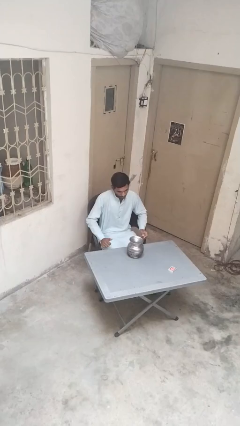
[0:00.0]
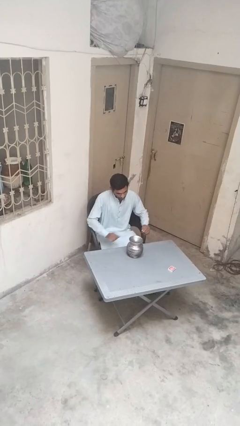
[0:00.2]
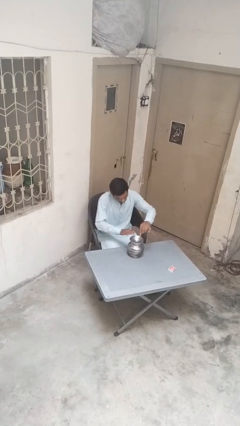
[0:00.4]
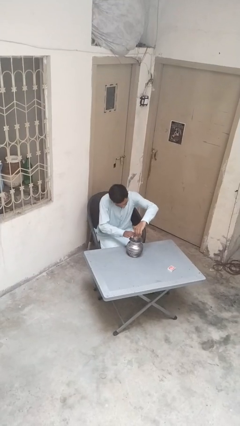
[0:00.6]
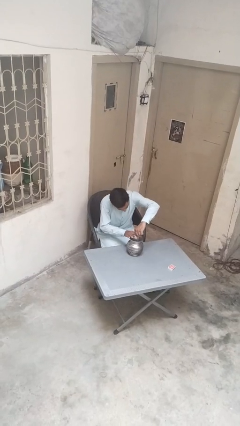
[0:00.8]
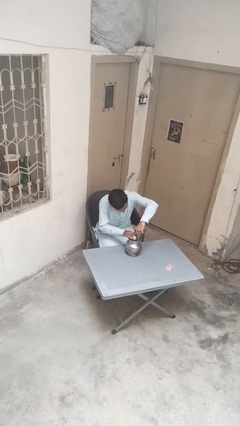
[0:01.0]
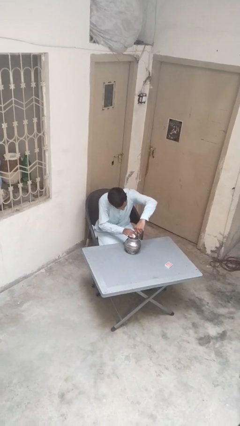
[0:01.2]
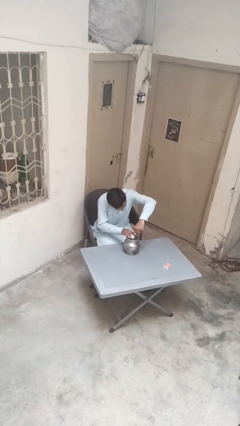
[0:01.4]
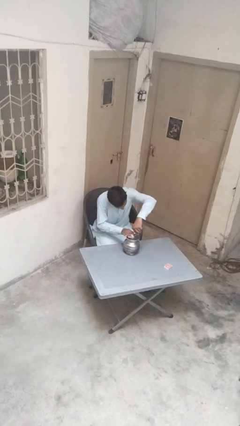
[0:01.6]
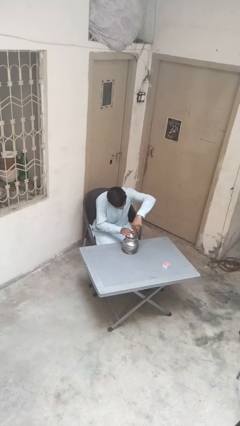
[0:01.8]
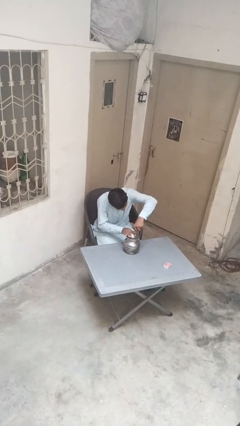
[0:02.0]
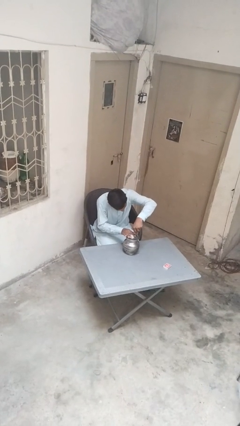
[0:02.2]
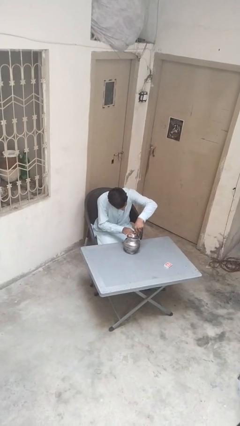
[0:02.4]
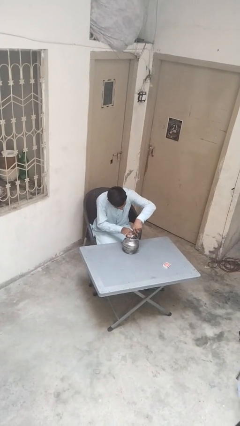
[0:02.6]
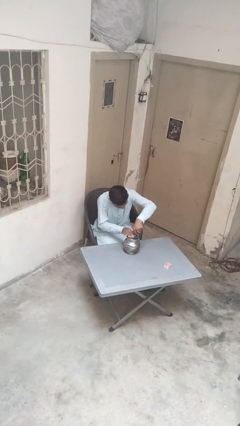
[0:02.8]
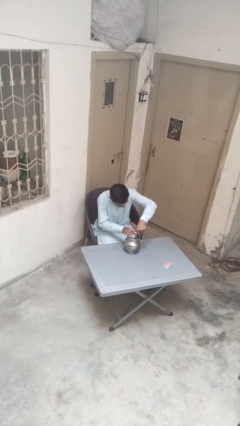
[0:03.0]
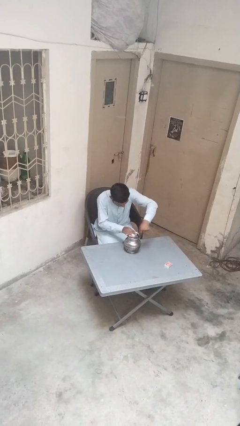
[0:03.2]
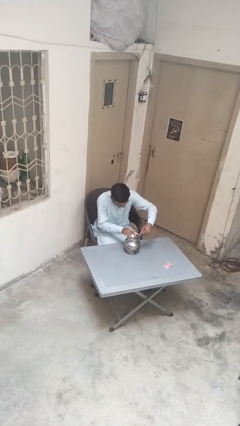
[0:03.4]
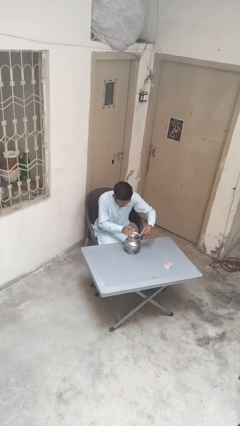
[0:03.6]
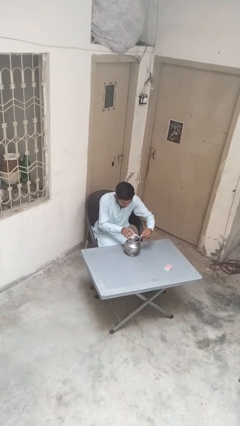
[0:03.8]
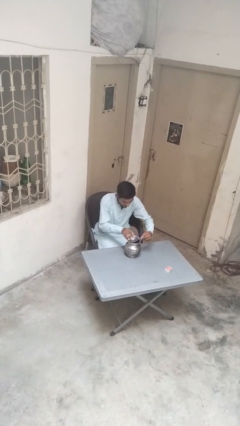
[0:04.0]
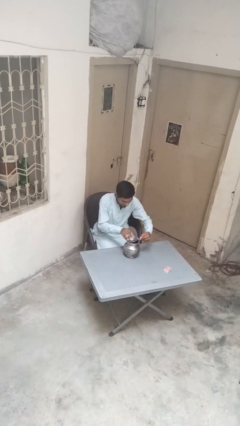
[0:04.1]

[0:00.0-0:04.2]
person opens can with can opener

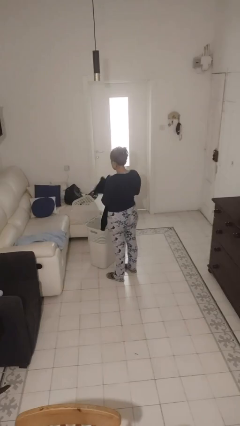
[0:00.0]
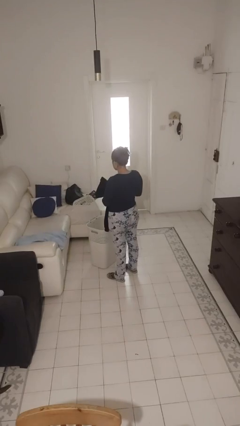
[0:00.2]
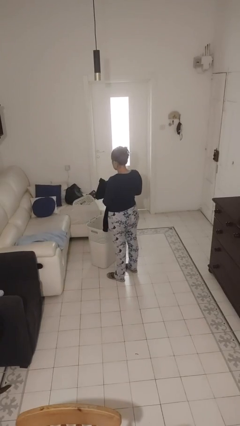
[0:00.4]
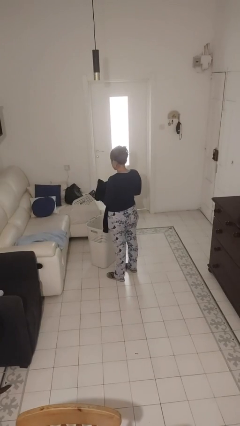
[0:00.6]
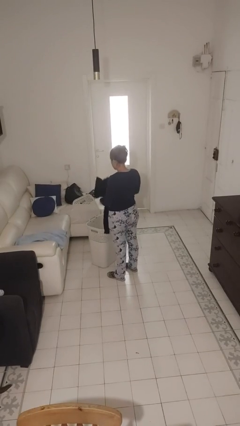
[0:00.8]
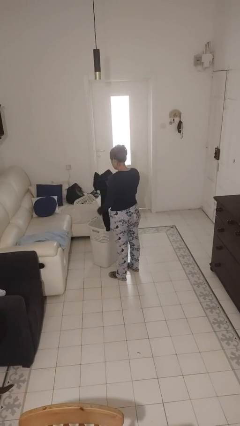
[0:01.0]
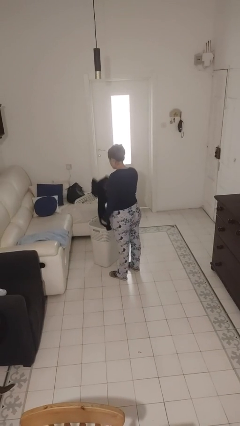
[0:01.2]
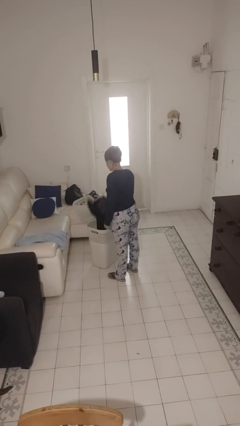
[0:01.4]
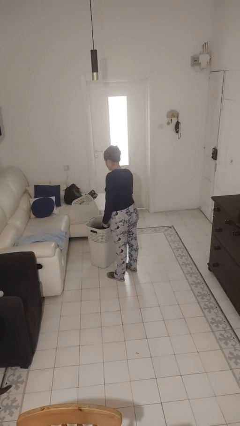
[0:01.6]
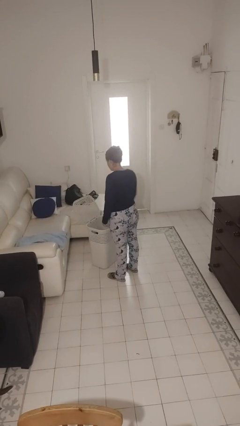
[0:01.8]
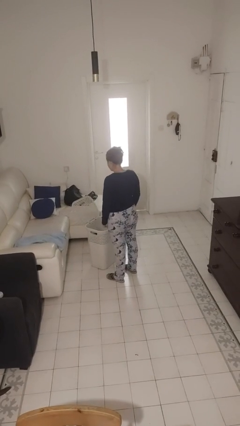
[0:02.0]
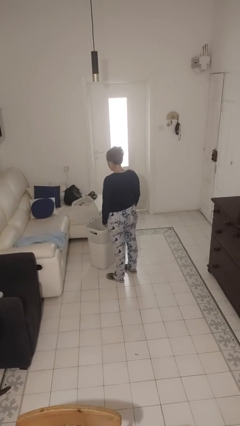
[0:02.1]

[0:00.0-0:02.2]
person puts object into basket

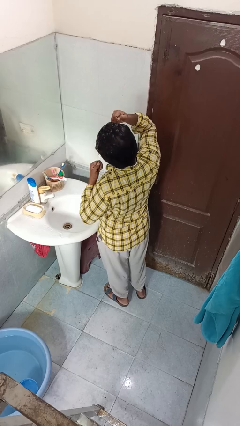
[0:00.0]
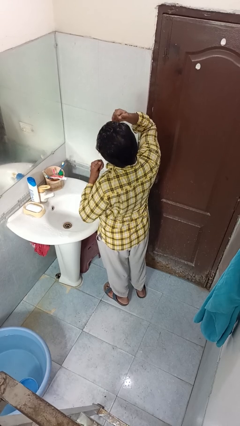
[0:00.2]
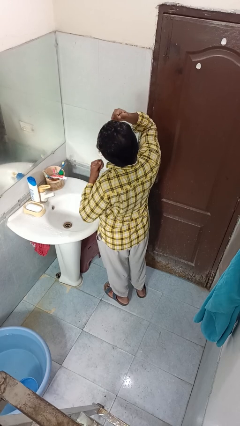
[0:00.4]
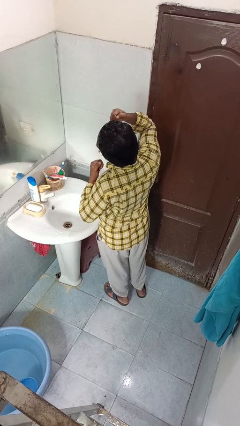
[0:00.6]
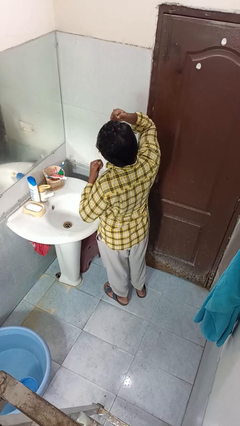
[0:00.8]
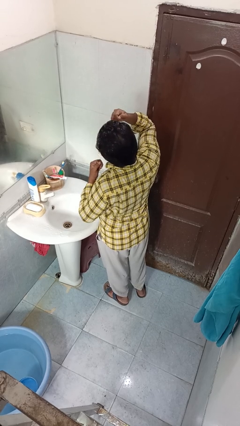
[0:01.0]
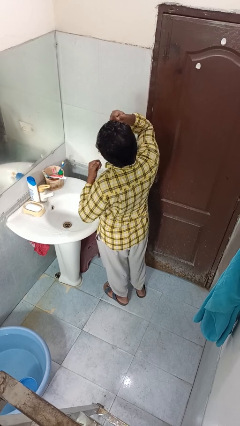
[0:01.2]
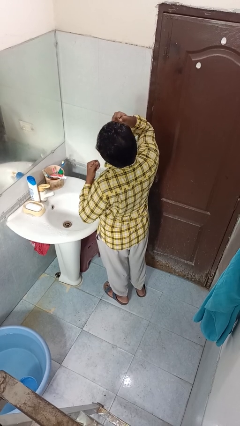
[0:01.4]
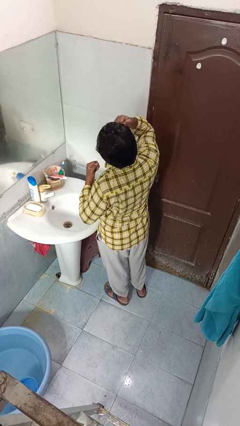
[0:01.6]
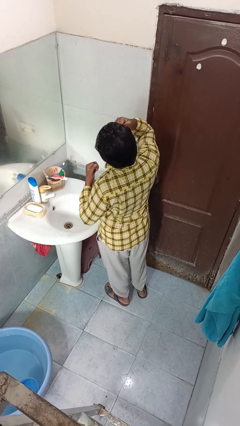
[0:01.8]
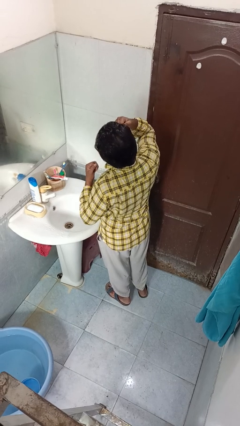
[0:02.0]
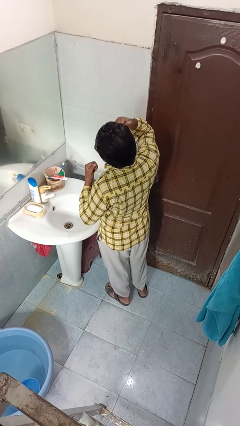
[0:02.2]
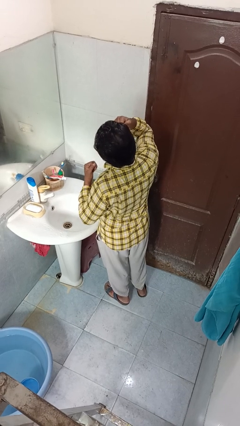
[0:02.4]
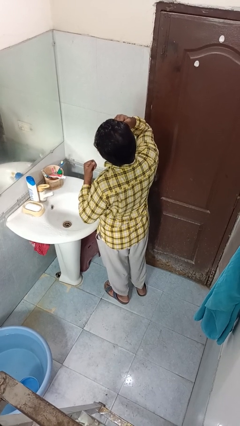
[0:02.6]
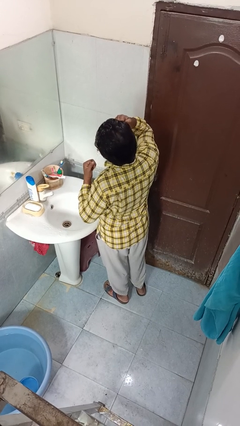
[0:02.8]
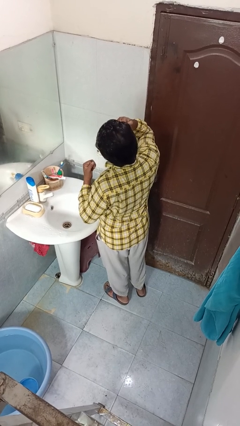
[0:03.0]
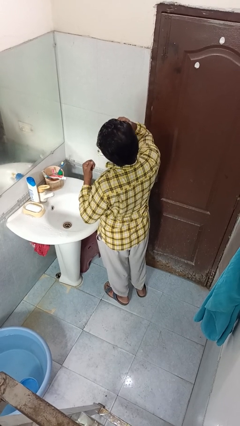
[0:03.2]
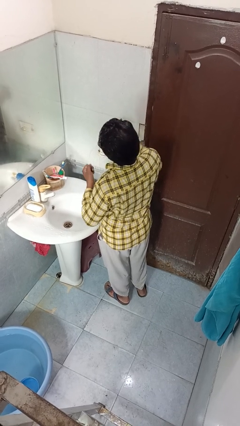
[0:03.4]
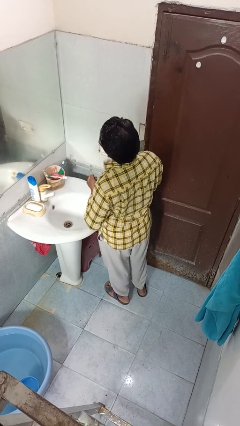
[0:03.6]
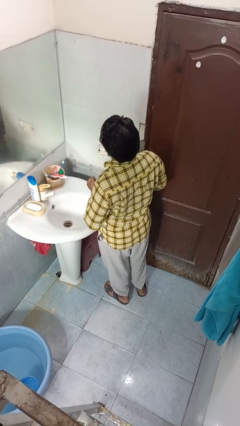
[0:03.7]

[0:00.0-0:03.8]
person flosses

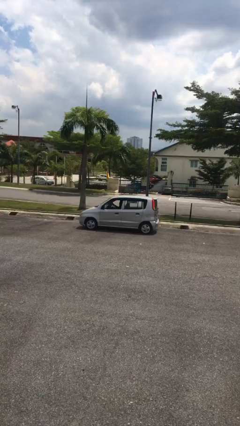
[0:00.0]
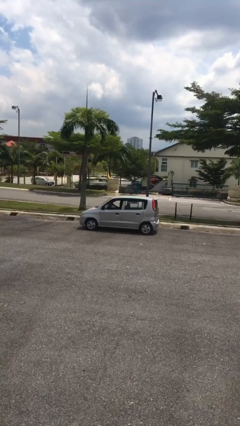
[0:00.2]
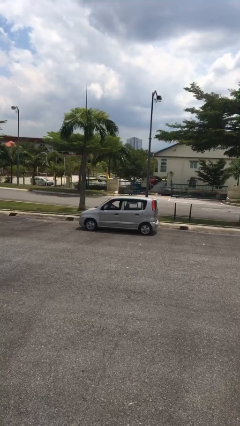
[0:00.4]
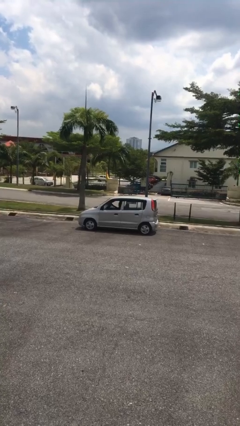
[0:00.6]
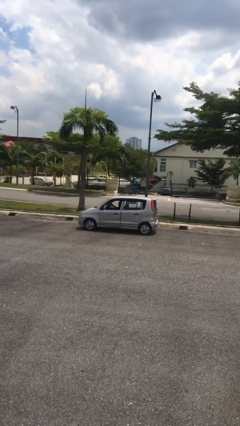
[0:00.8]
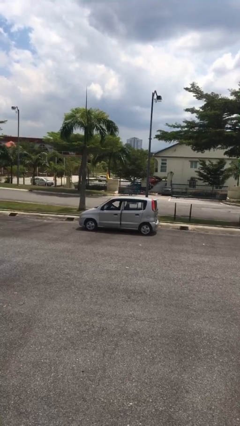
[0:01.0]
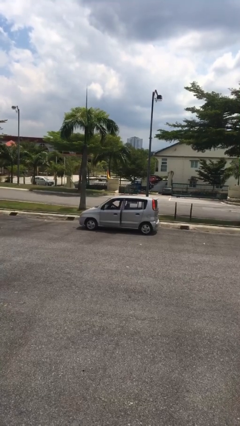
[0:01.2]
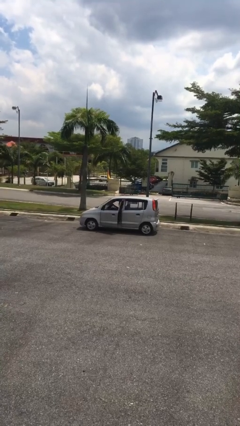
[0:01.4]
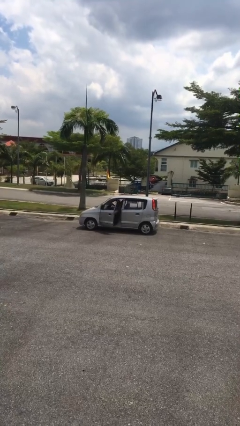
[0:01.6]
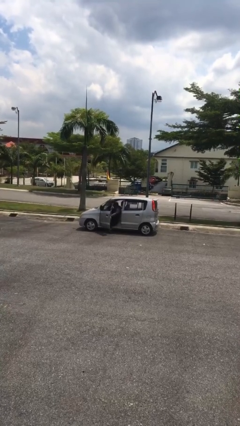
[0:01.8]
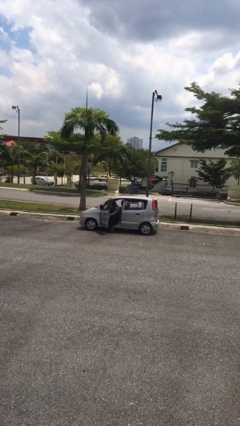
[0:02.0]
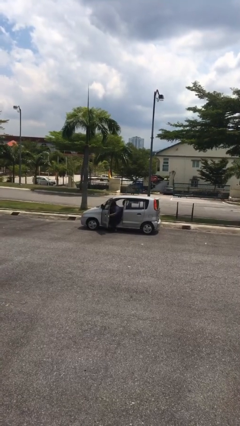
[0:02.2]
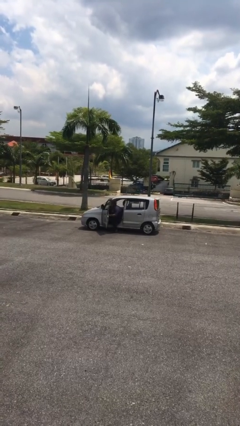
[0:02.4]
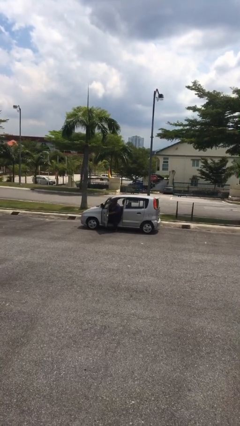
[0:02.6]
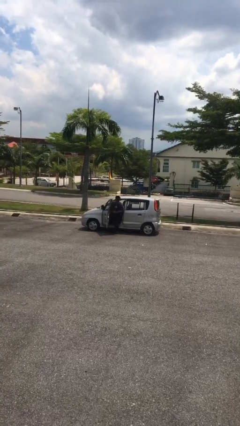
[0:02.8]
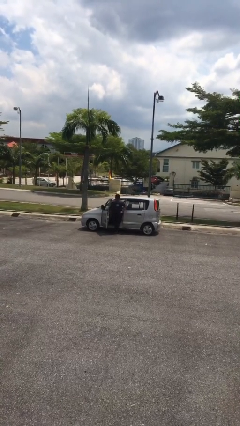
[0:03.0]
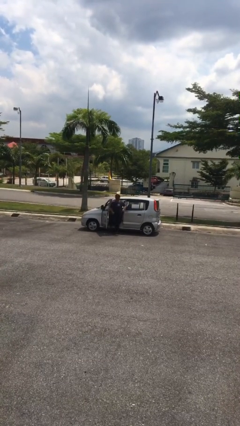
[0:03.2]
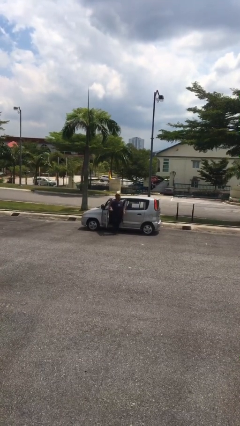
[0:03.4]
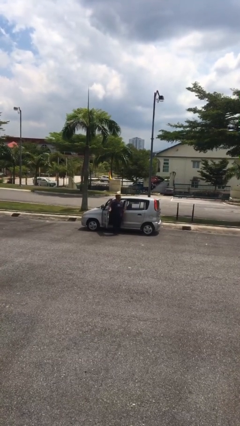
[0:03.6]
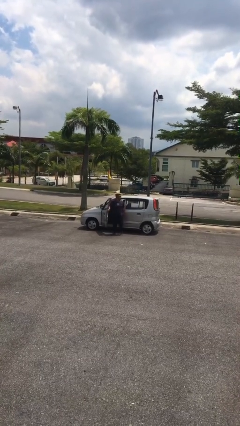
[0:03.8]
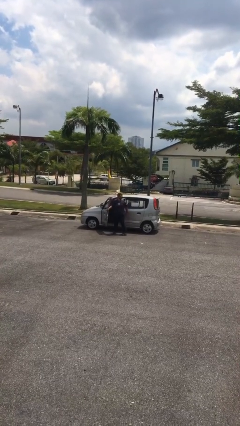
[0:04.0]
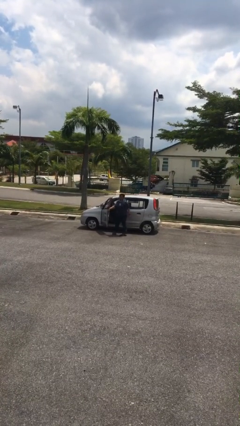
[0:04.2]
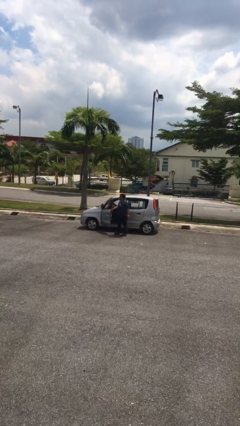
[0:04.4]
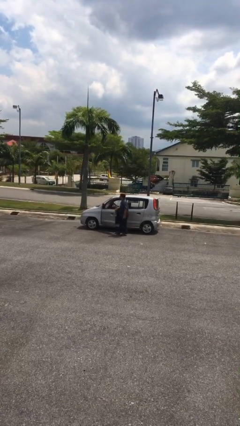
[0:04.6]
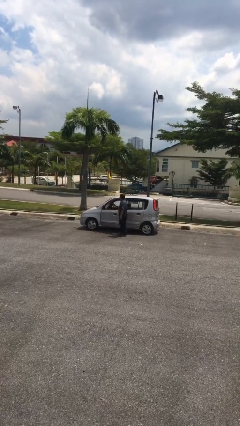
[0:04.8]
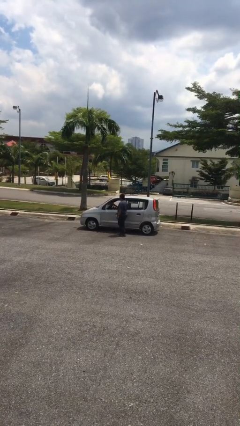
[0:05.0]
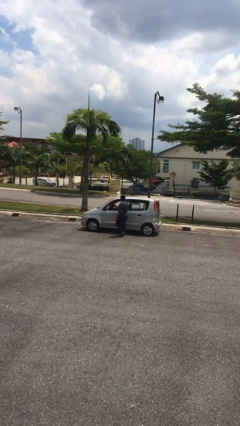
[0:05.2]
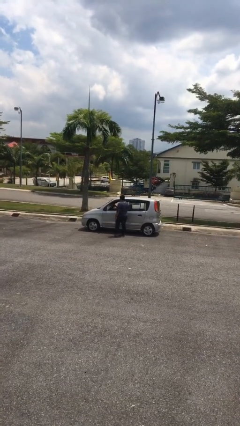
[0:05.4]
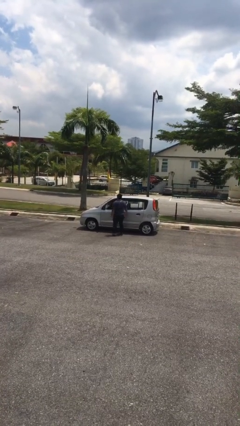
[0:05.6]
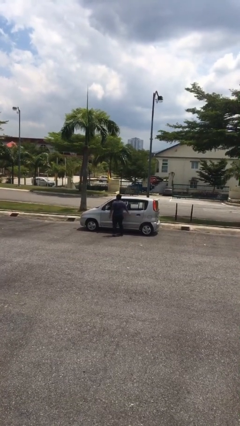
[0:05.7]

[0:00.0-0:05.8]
car drops off person

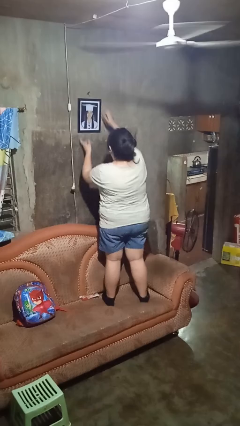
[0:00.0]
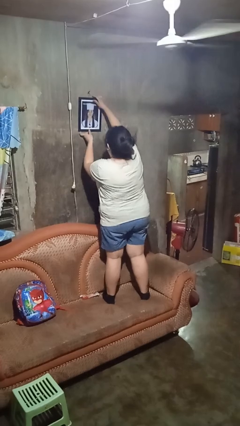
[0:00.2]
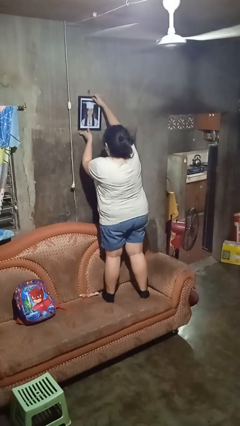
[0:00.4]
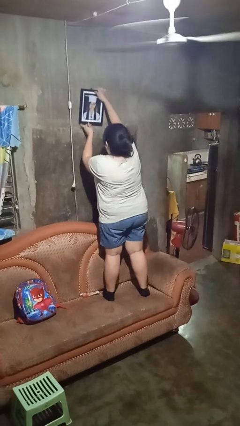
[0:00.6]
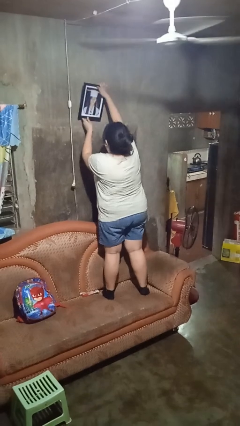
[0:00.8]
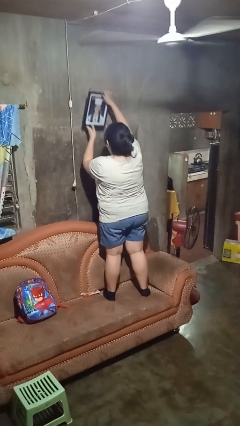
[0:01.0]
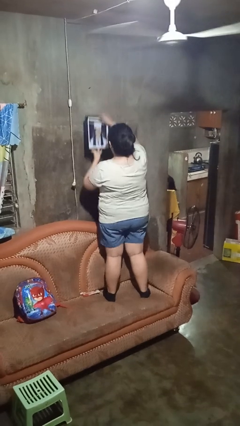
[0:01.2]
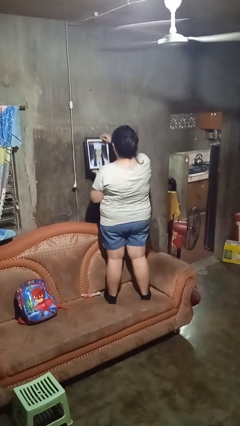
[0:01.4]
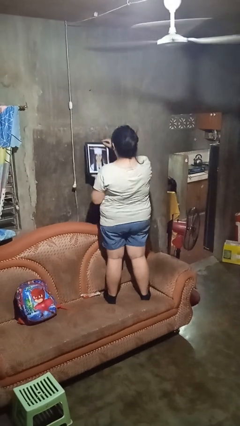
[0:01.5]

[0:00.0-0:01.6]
person takes down picture frame
